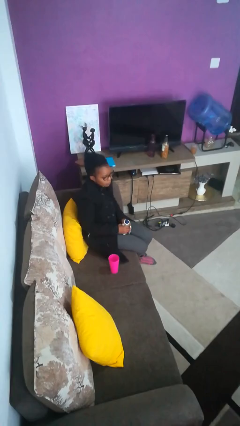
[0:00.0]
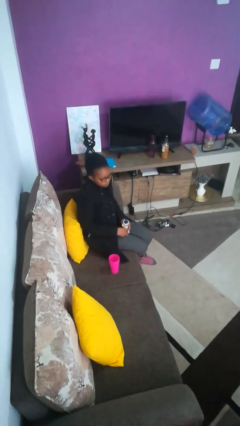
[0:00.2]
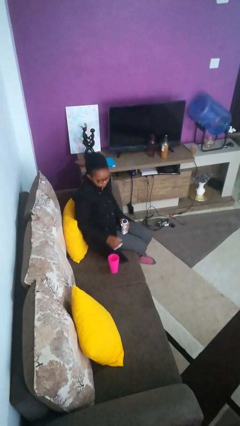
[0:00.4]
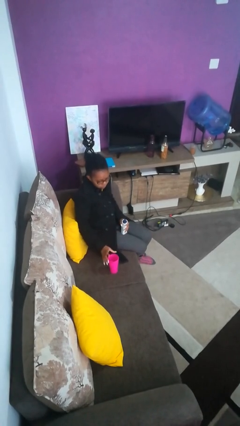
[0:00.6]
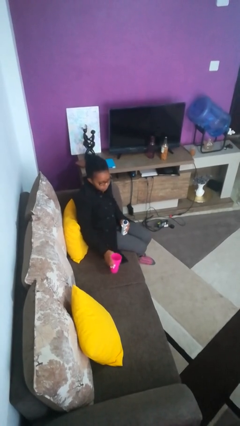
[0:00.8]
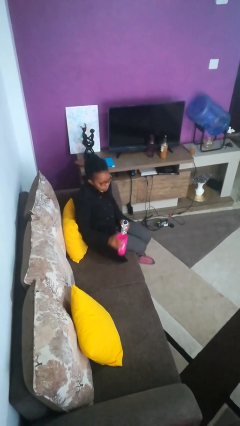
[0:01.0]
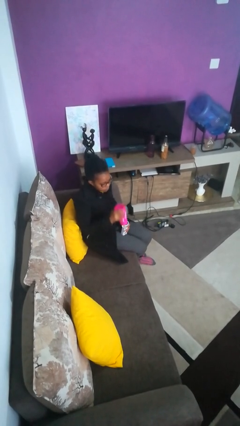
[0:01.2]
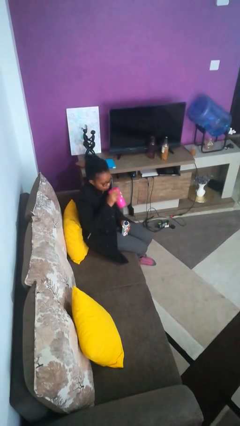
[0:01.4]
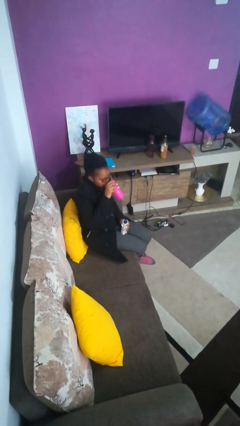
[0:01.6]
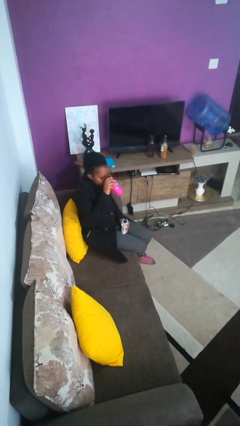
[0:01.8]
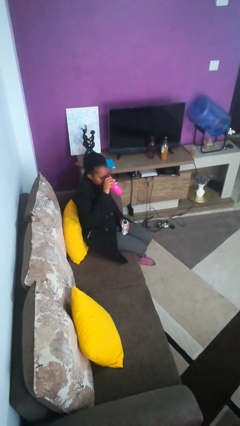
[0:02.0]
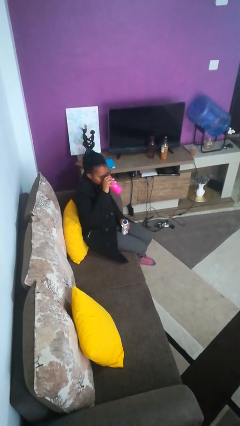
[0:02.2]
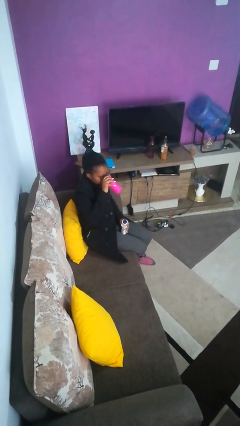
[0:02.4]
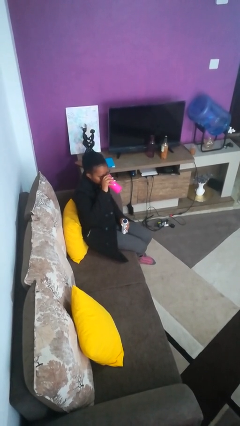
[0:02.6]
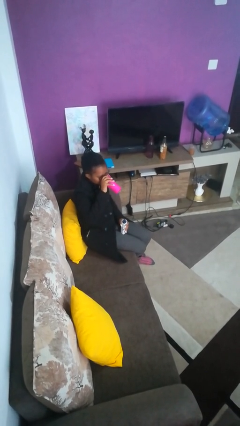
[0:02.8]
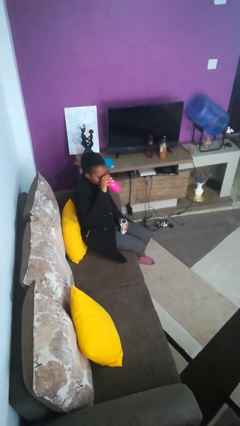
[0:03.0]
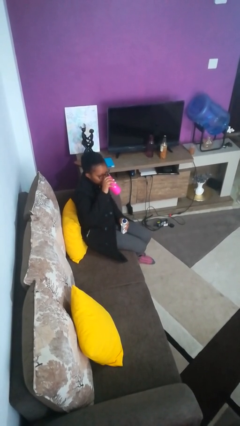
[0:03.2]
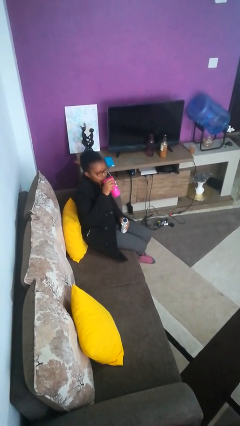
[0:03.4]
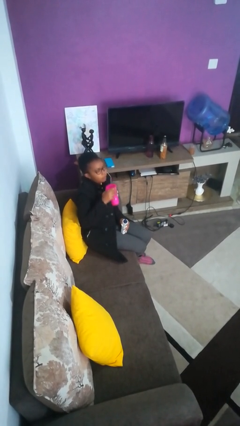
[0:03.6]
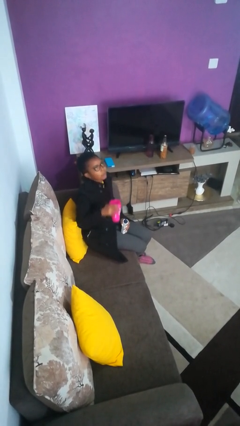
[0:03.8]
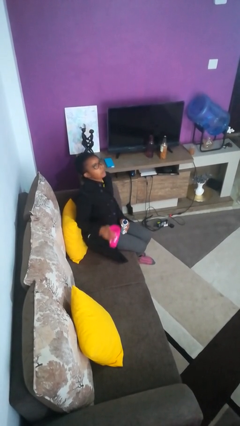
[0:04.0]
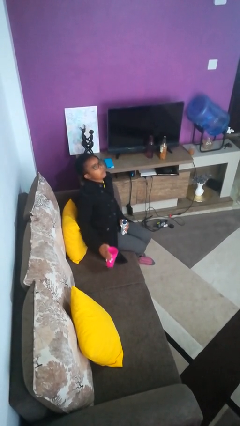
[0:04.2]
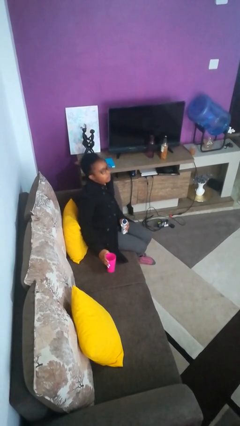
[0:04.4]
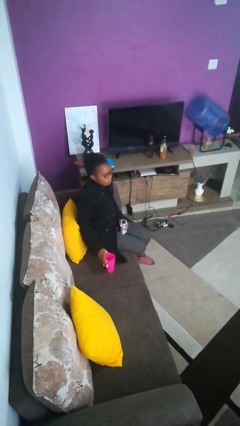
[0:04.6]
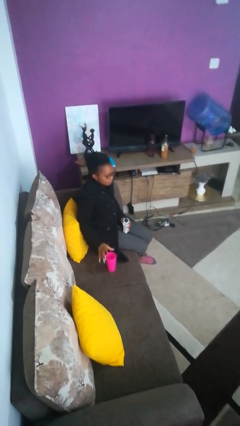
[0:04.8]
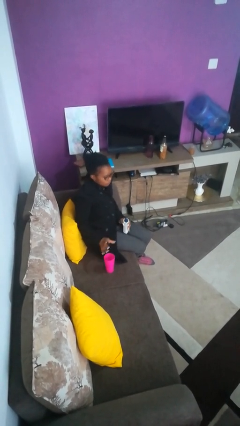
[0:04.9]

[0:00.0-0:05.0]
person drinks from cup

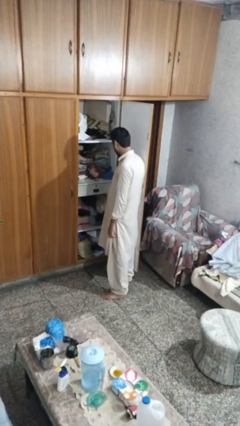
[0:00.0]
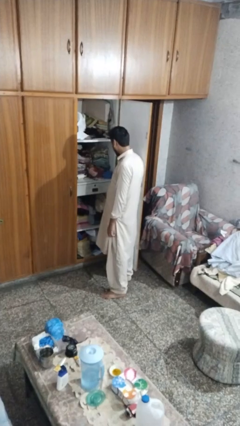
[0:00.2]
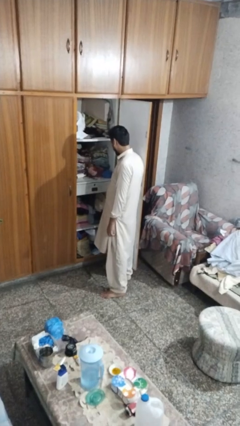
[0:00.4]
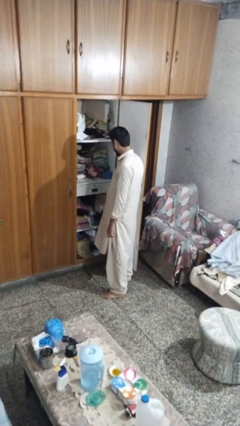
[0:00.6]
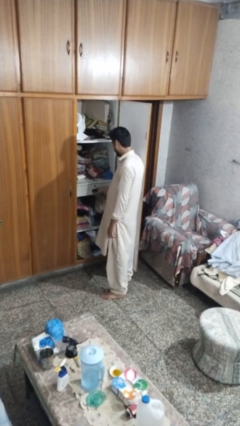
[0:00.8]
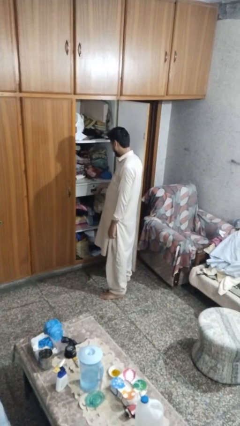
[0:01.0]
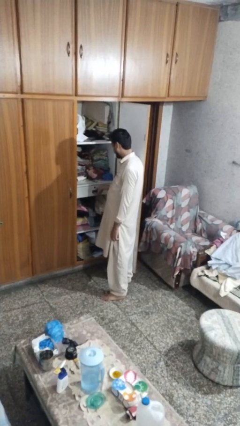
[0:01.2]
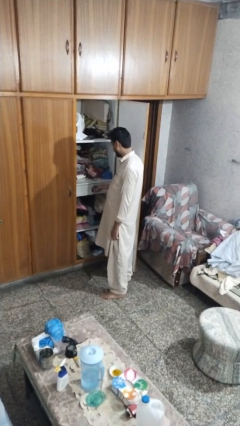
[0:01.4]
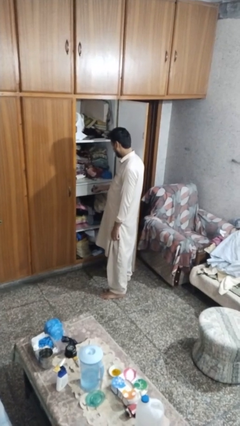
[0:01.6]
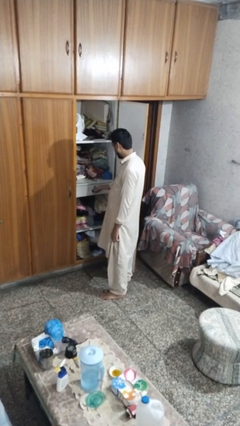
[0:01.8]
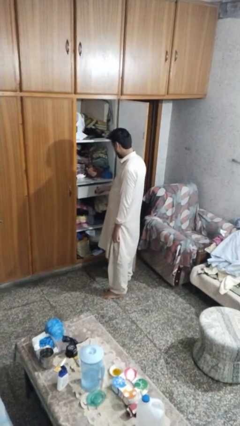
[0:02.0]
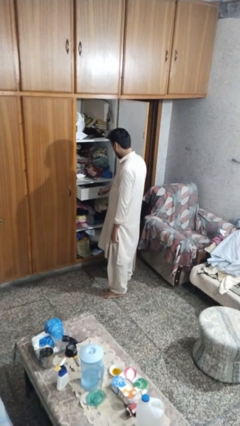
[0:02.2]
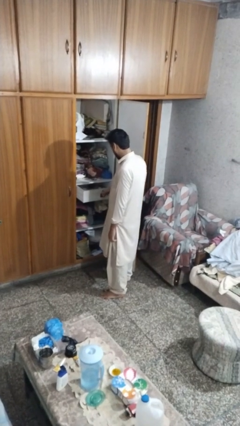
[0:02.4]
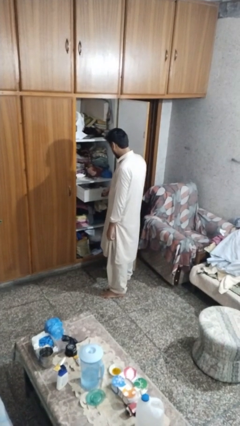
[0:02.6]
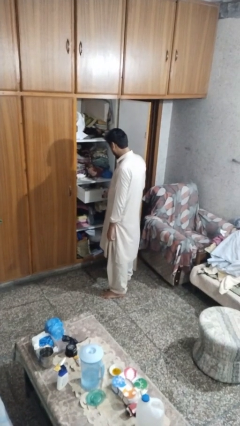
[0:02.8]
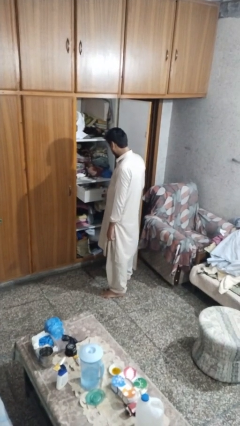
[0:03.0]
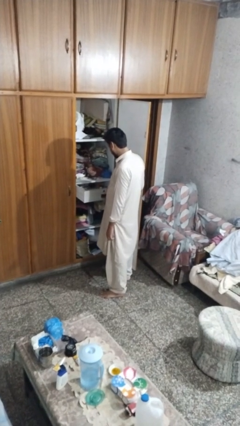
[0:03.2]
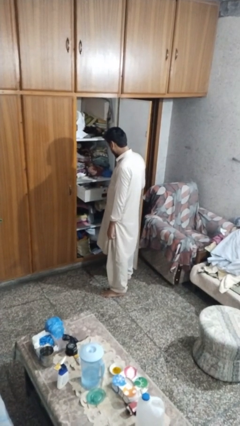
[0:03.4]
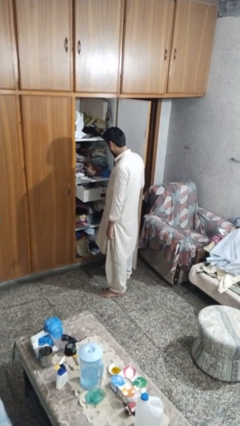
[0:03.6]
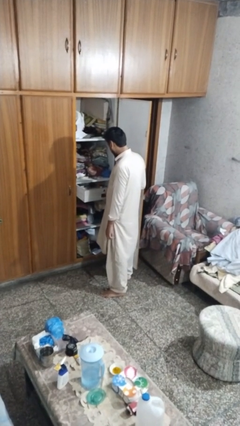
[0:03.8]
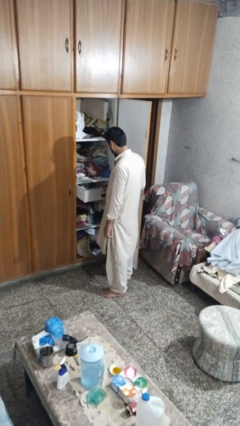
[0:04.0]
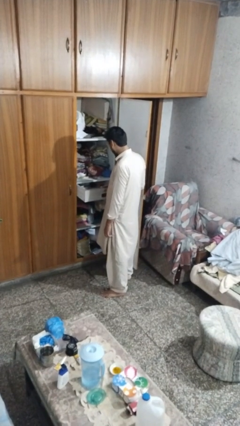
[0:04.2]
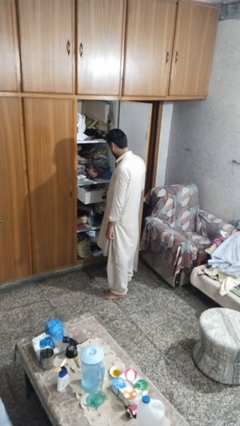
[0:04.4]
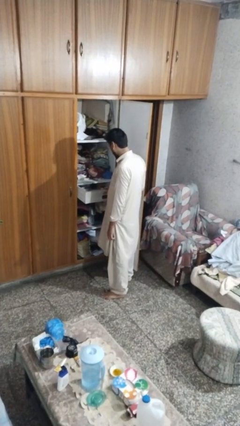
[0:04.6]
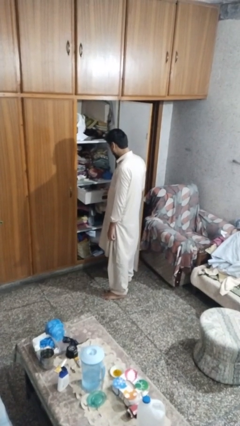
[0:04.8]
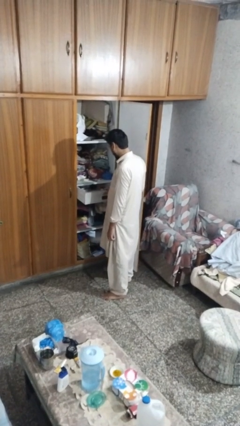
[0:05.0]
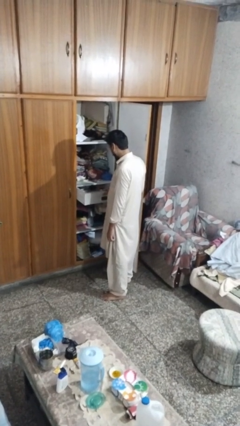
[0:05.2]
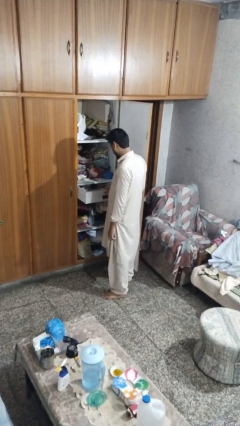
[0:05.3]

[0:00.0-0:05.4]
person opens dresser drawer

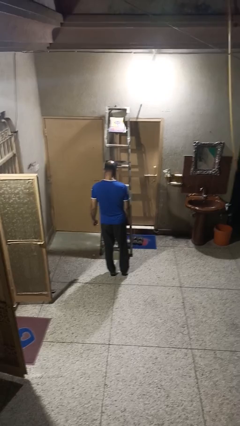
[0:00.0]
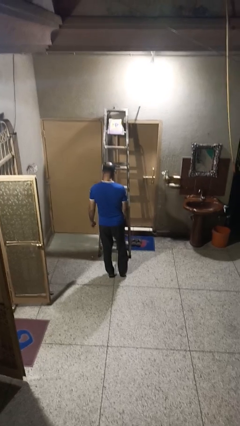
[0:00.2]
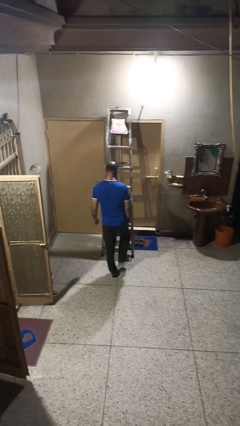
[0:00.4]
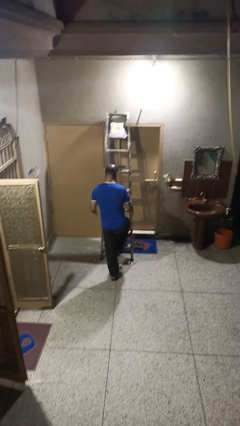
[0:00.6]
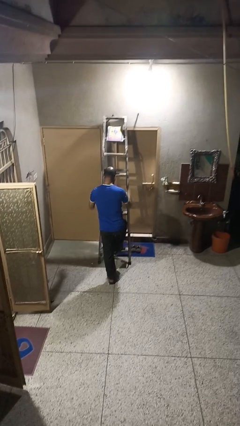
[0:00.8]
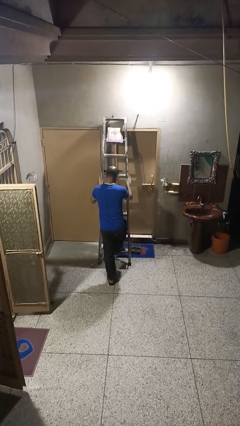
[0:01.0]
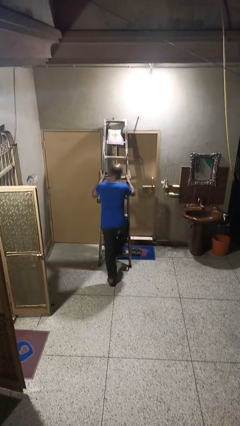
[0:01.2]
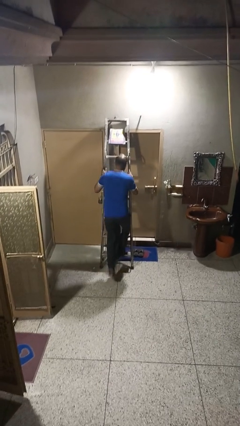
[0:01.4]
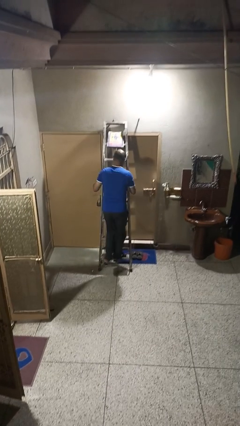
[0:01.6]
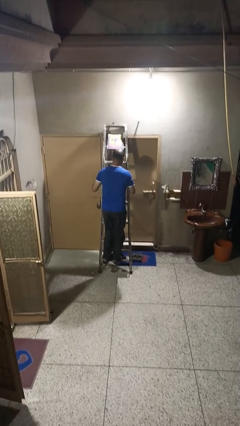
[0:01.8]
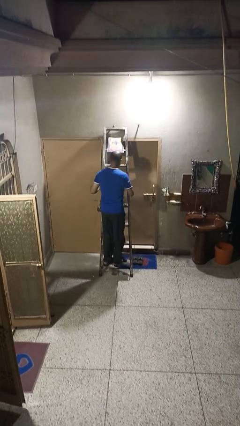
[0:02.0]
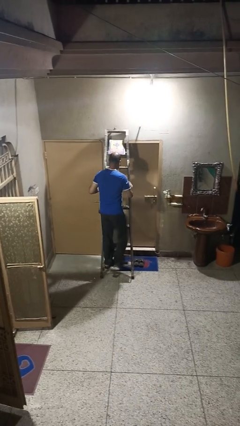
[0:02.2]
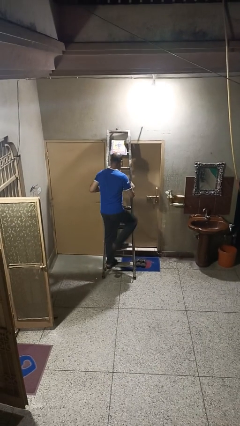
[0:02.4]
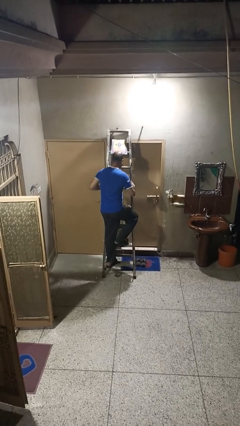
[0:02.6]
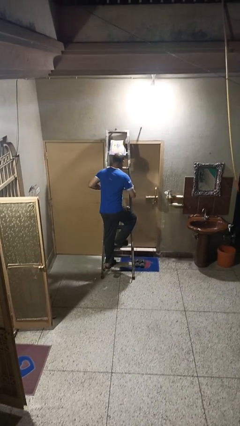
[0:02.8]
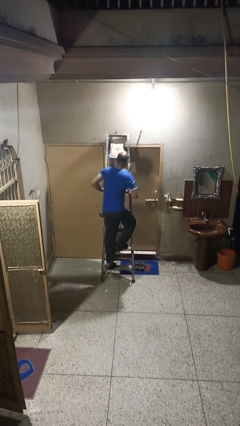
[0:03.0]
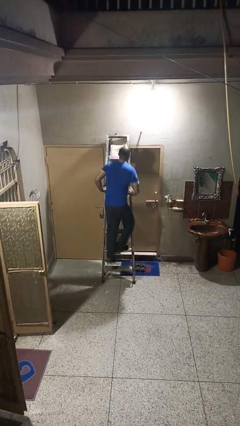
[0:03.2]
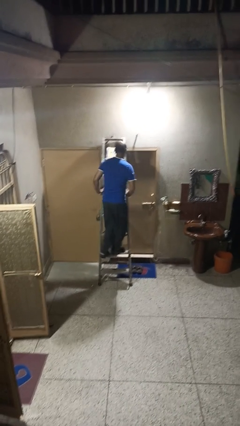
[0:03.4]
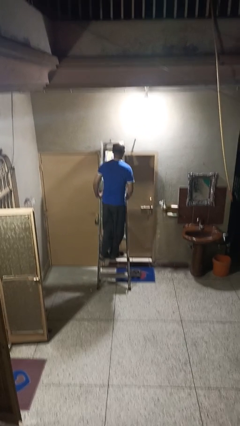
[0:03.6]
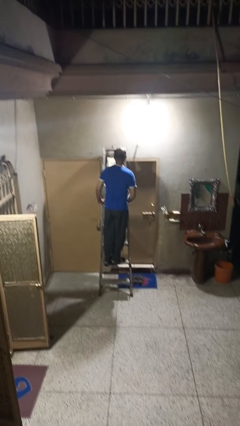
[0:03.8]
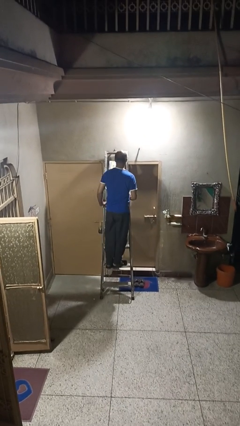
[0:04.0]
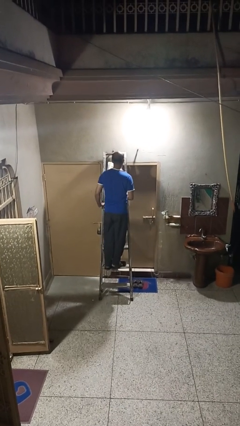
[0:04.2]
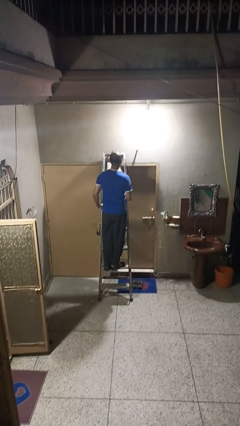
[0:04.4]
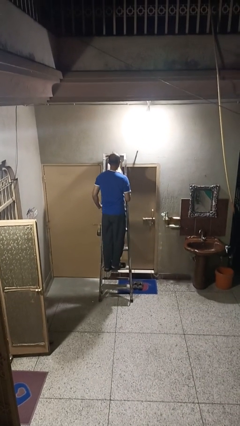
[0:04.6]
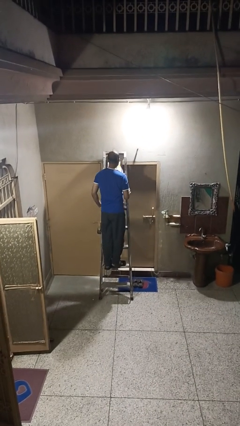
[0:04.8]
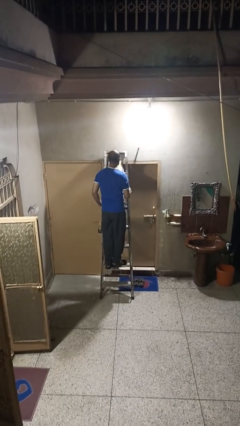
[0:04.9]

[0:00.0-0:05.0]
person climbs up ladder

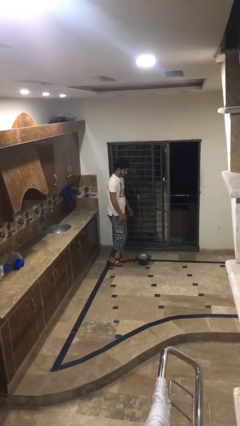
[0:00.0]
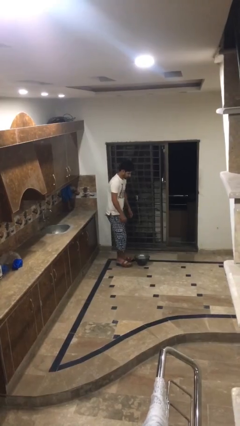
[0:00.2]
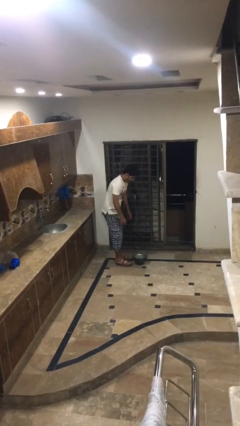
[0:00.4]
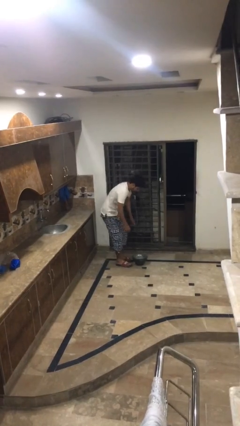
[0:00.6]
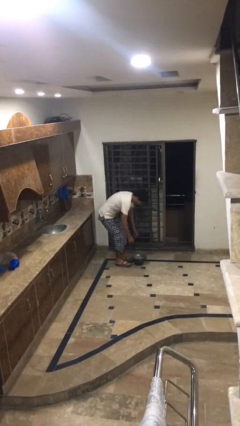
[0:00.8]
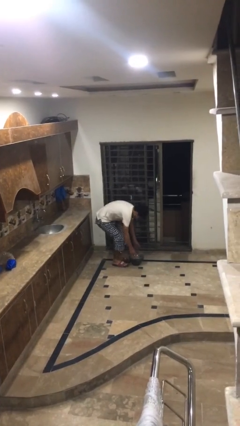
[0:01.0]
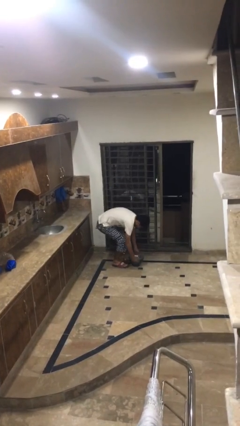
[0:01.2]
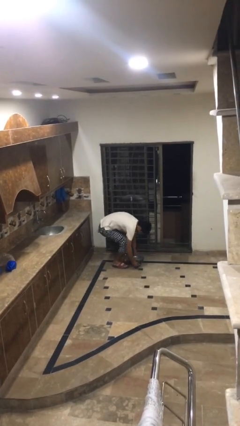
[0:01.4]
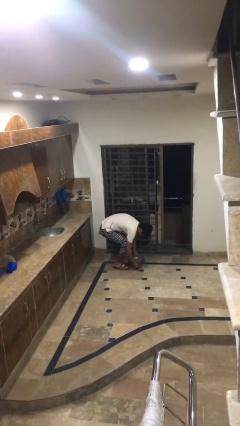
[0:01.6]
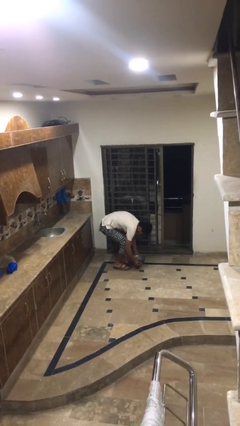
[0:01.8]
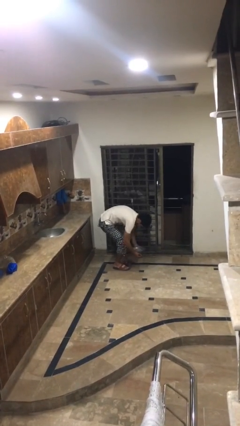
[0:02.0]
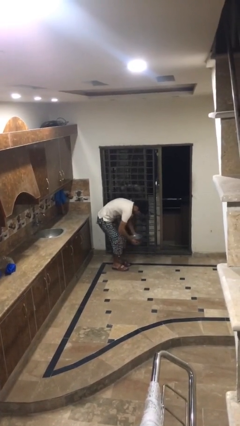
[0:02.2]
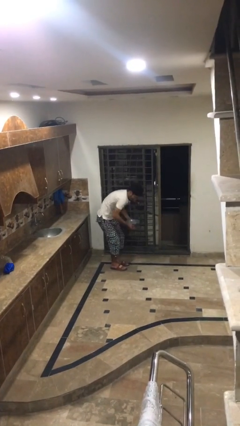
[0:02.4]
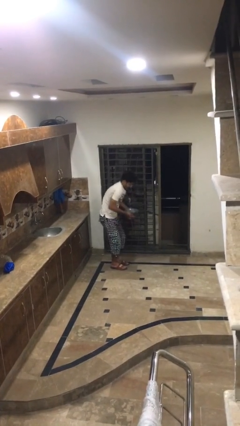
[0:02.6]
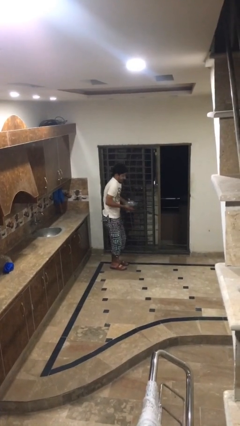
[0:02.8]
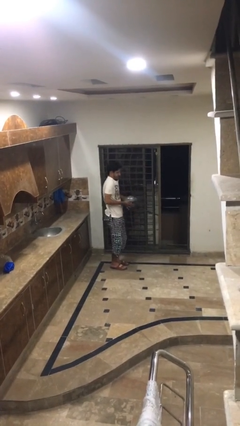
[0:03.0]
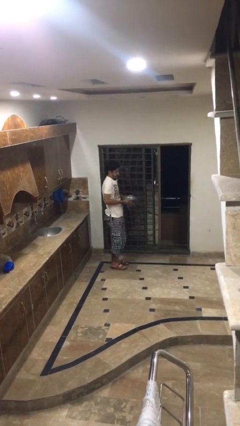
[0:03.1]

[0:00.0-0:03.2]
person picks up object from floor
